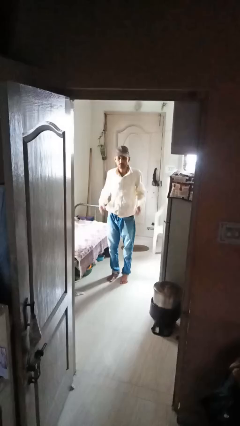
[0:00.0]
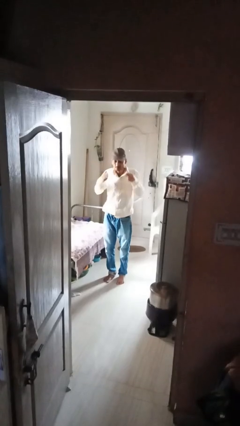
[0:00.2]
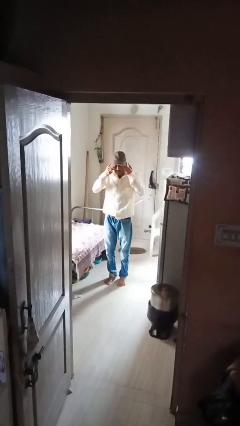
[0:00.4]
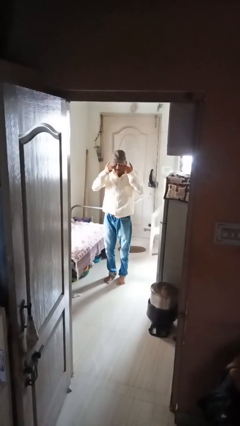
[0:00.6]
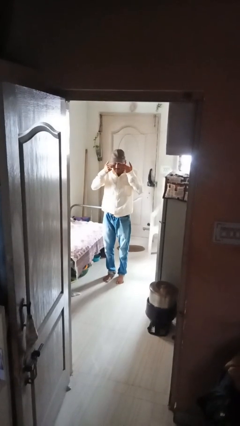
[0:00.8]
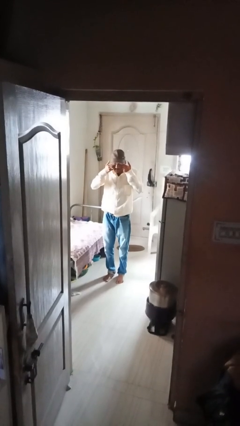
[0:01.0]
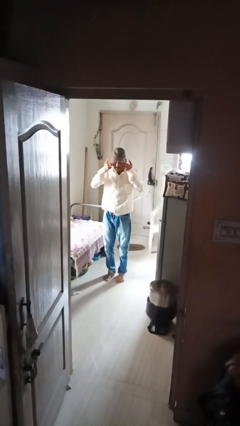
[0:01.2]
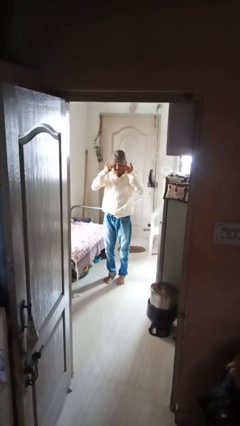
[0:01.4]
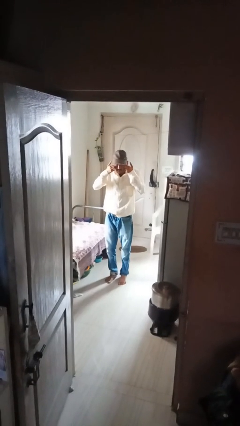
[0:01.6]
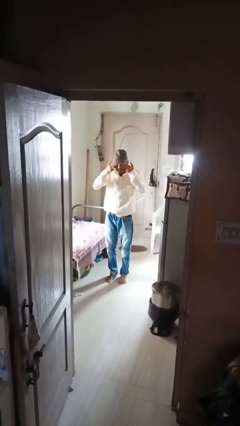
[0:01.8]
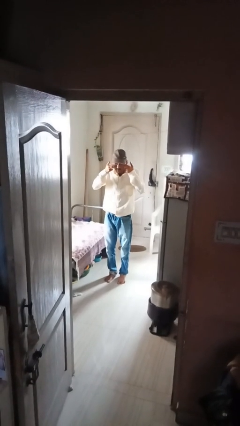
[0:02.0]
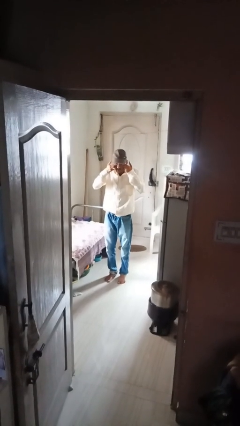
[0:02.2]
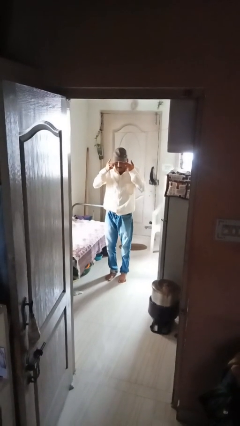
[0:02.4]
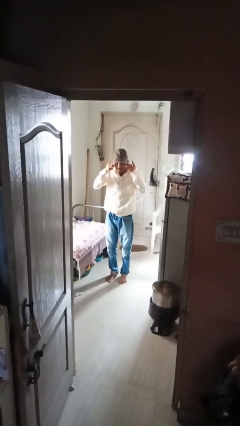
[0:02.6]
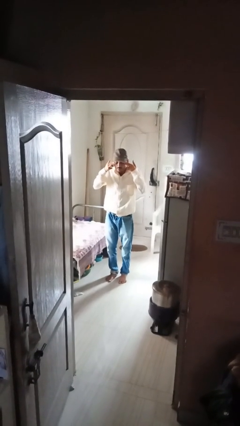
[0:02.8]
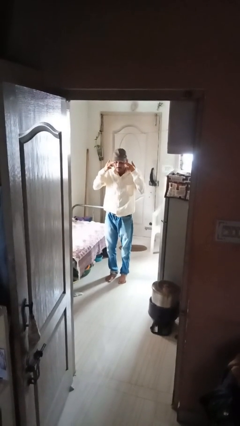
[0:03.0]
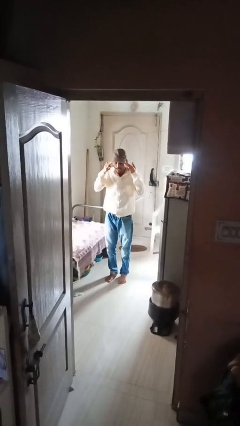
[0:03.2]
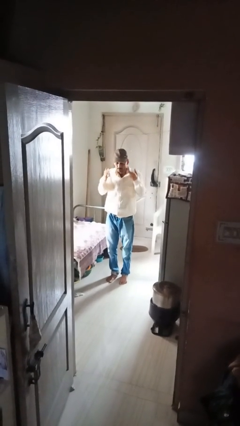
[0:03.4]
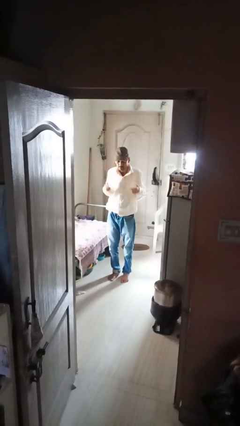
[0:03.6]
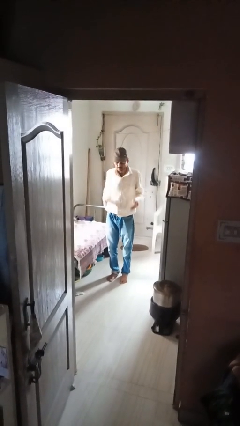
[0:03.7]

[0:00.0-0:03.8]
person rubs eyes

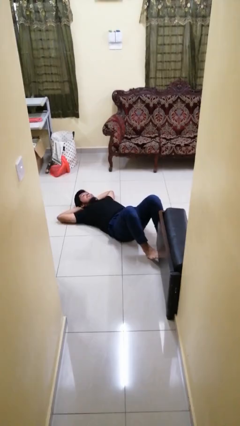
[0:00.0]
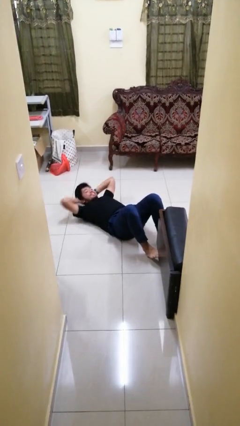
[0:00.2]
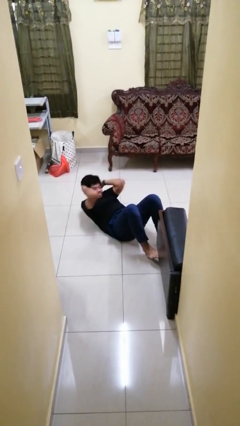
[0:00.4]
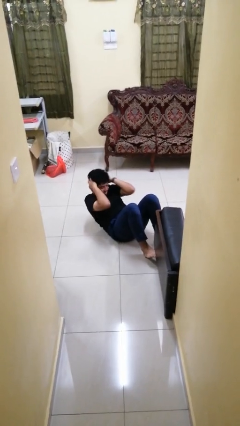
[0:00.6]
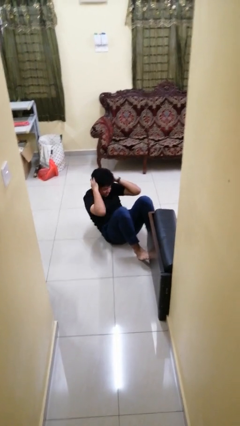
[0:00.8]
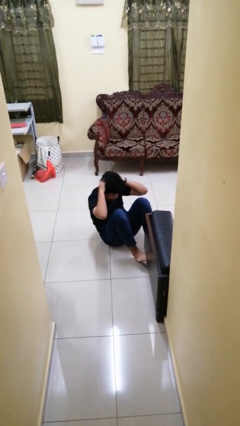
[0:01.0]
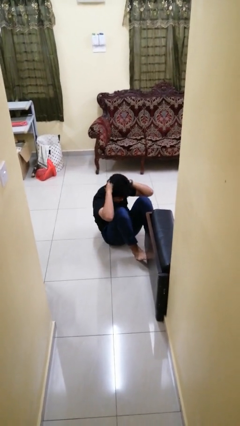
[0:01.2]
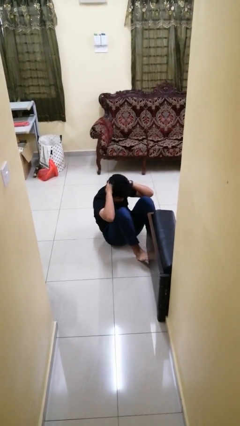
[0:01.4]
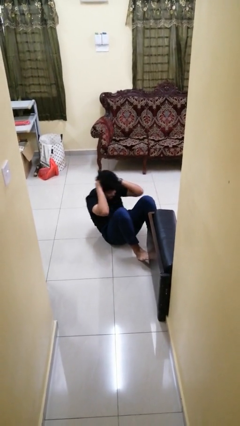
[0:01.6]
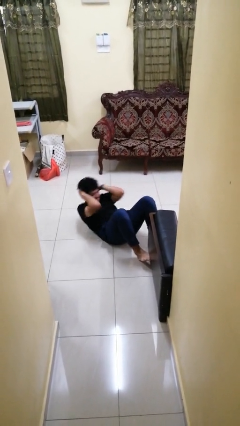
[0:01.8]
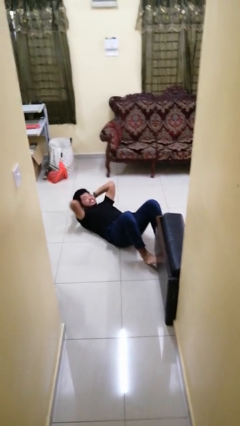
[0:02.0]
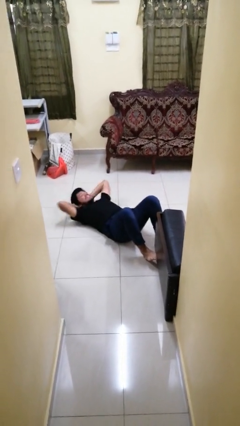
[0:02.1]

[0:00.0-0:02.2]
person exercises with situp

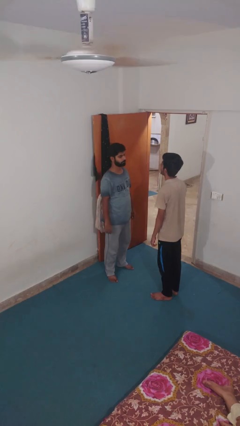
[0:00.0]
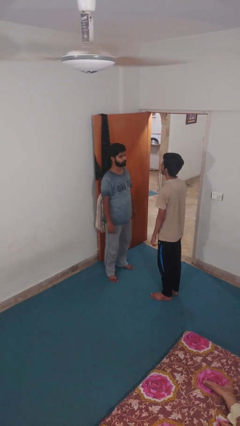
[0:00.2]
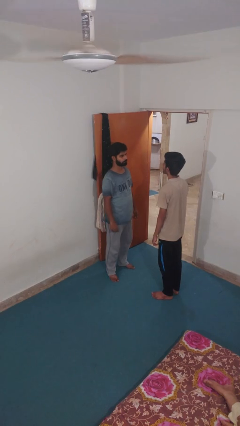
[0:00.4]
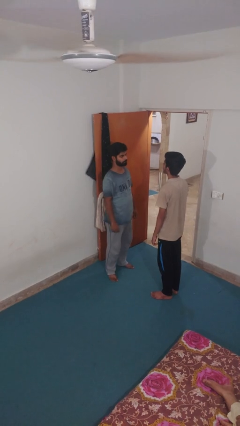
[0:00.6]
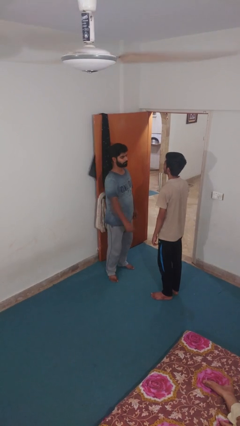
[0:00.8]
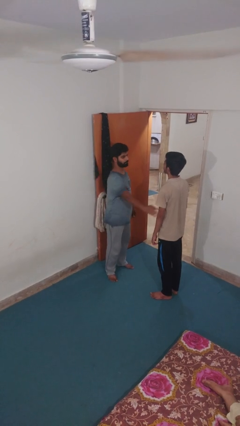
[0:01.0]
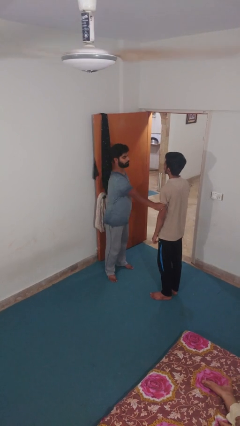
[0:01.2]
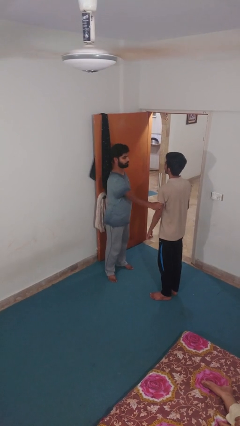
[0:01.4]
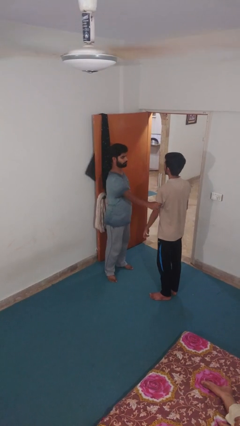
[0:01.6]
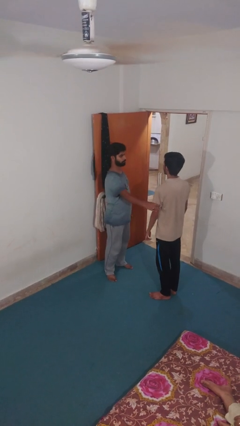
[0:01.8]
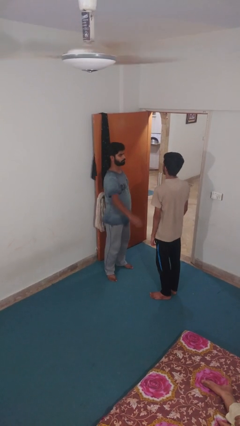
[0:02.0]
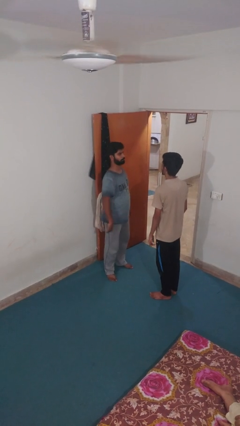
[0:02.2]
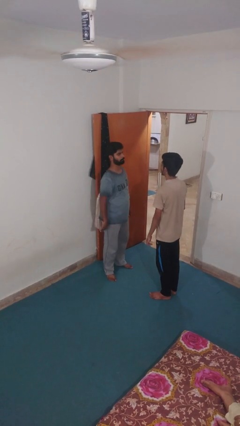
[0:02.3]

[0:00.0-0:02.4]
person grabs person by bicep

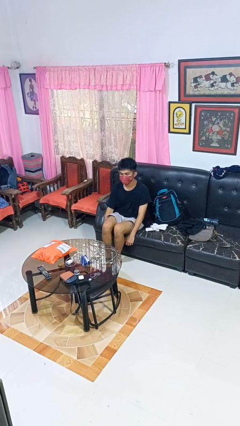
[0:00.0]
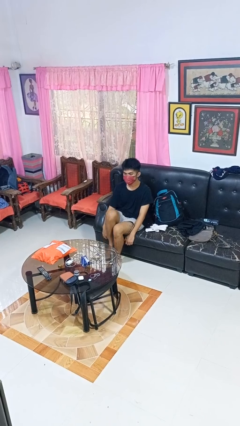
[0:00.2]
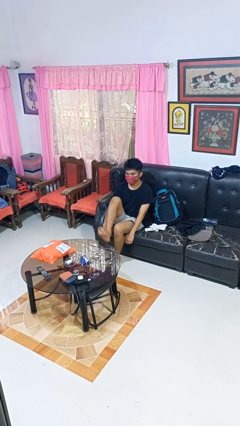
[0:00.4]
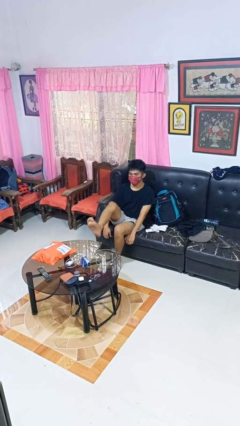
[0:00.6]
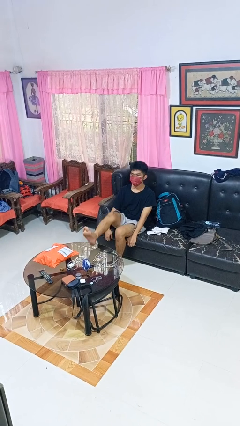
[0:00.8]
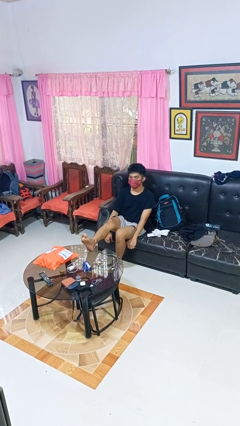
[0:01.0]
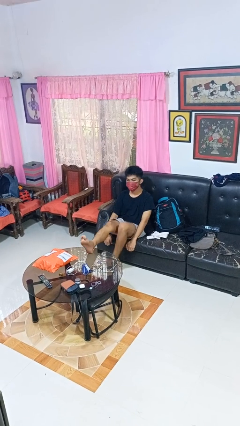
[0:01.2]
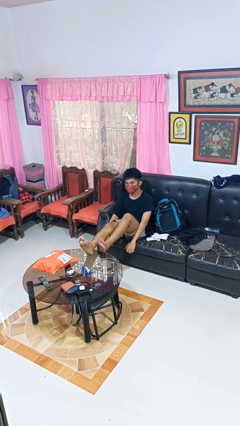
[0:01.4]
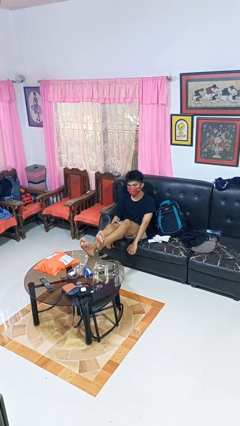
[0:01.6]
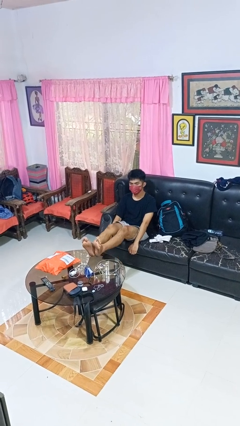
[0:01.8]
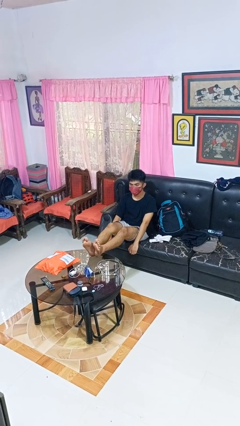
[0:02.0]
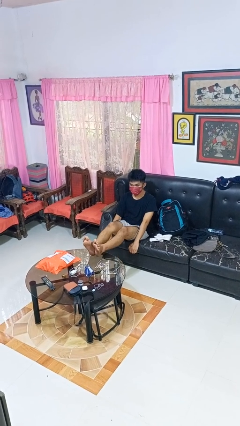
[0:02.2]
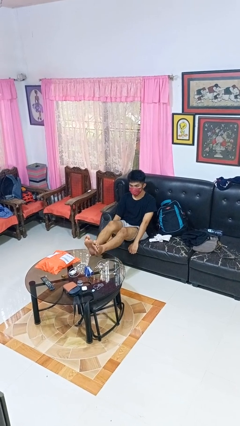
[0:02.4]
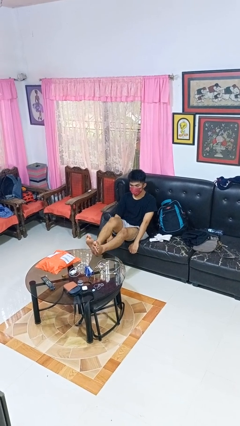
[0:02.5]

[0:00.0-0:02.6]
person puts feet up

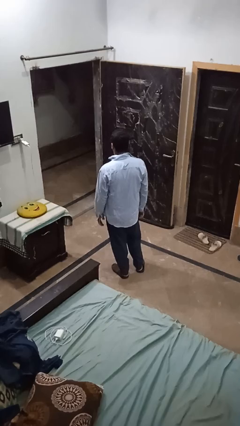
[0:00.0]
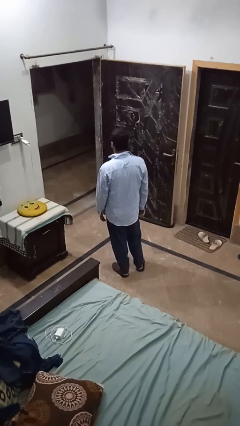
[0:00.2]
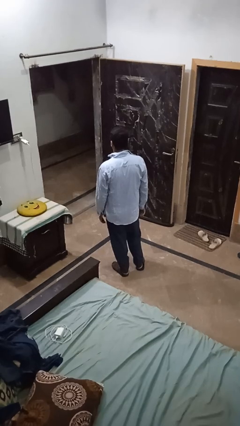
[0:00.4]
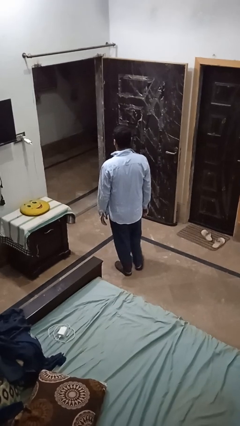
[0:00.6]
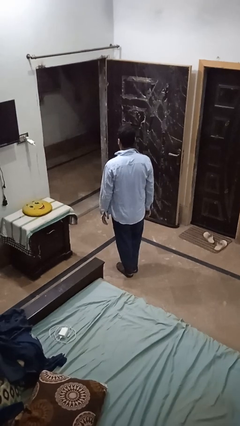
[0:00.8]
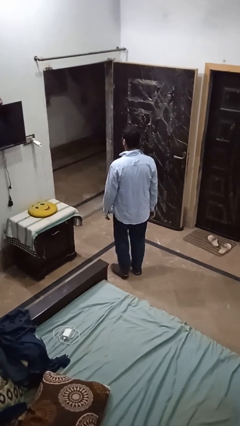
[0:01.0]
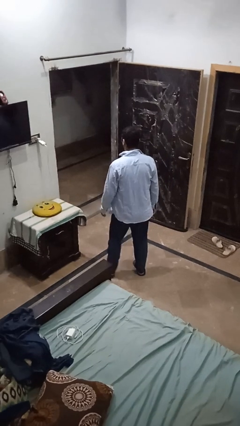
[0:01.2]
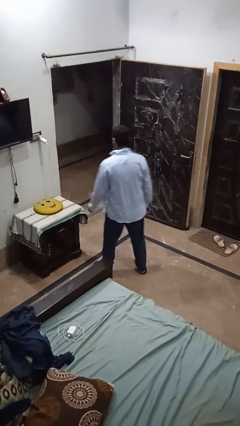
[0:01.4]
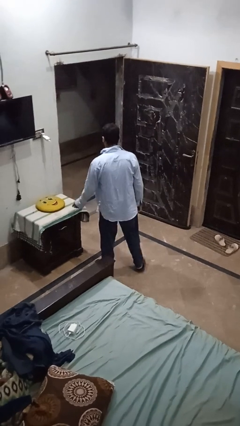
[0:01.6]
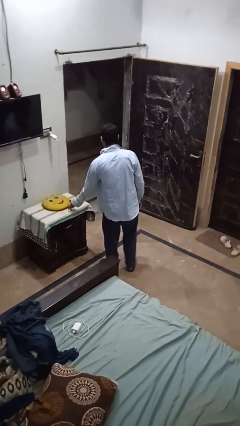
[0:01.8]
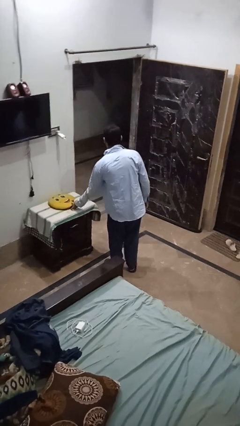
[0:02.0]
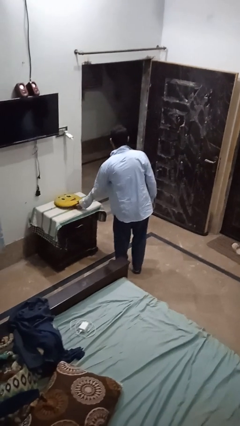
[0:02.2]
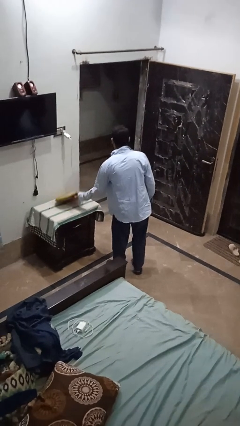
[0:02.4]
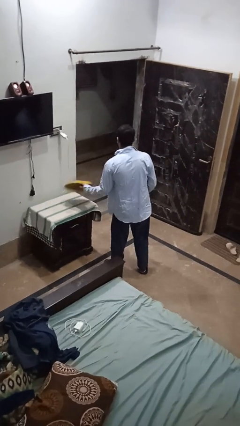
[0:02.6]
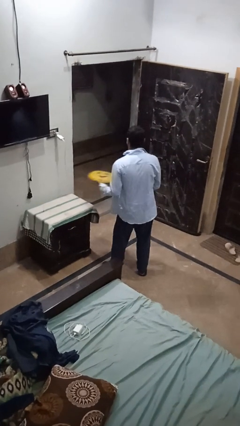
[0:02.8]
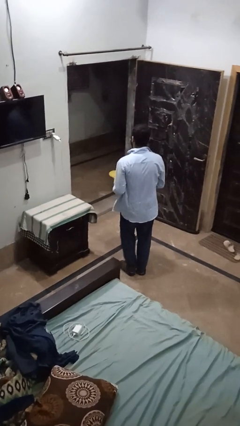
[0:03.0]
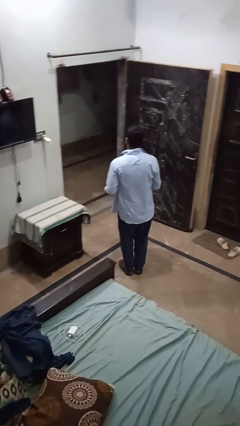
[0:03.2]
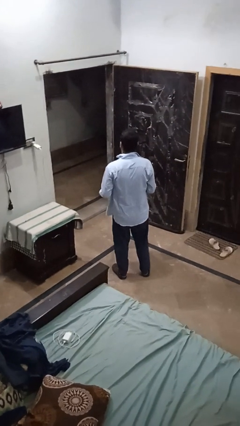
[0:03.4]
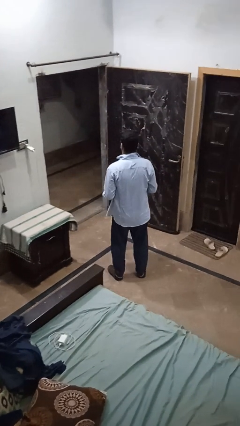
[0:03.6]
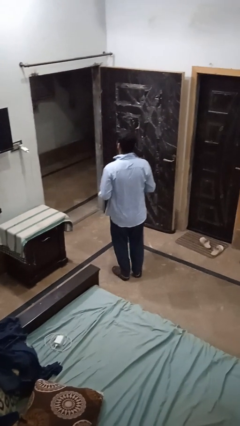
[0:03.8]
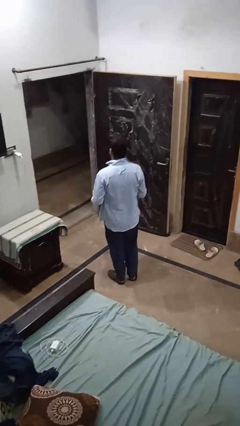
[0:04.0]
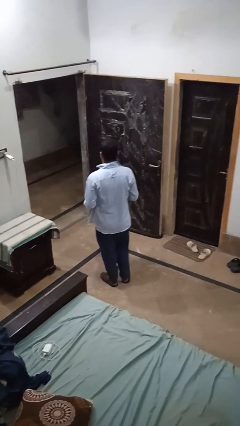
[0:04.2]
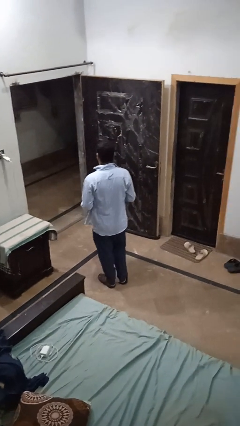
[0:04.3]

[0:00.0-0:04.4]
person picks up object from table

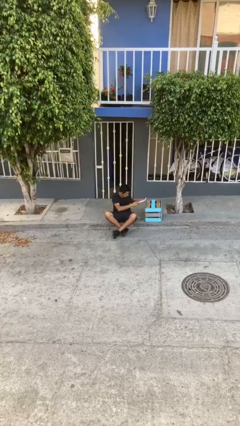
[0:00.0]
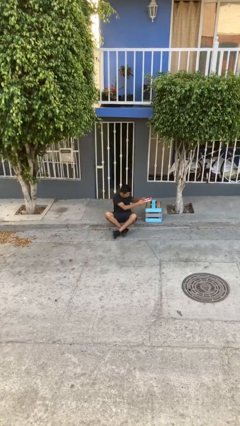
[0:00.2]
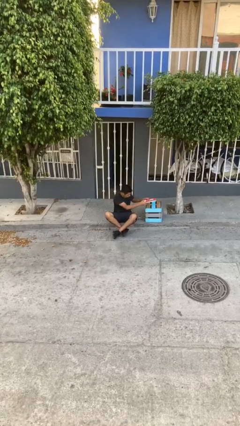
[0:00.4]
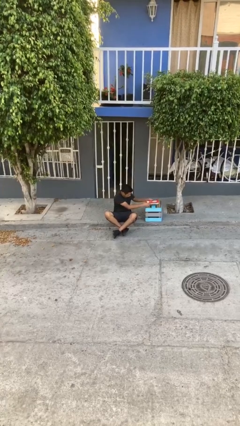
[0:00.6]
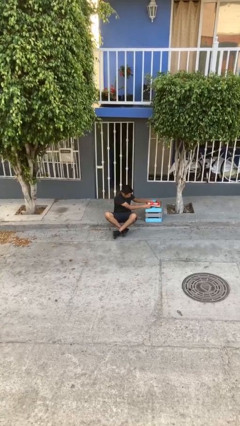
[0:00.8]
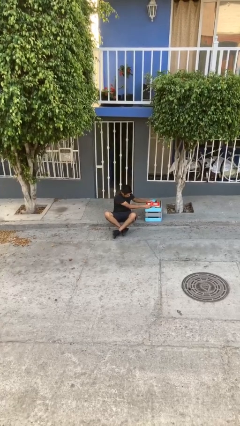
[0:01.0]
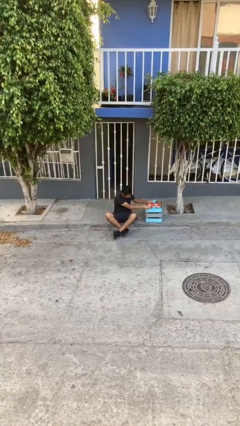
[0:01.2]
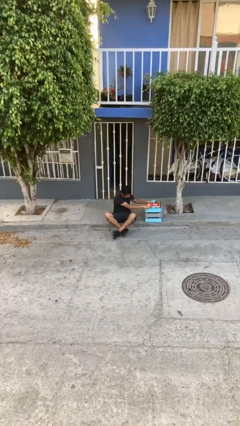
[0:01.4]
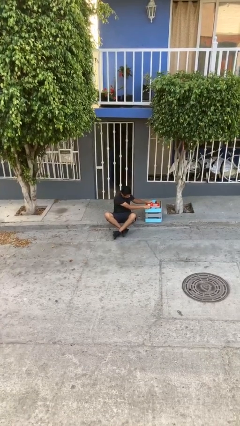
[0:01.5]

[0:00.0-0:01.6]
person puts down object on table

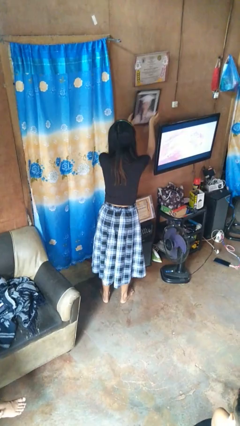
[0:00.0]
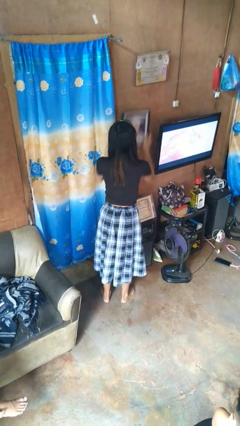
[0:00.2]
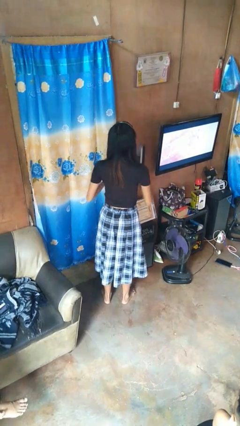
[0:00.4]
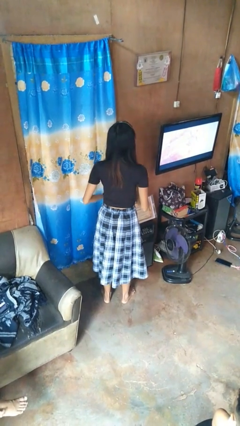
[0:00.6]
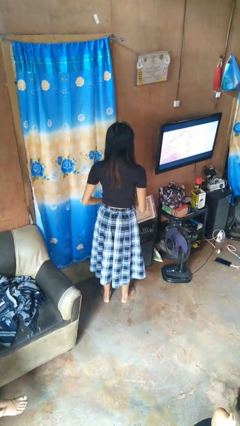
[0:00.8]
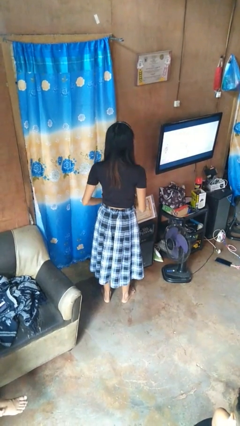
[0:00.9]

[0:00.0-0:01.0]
person takes down picture frame
